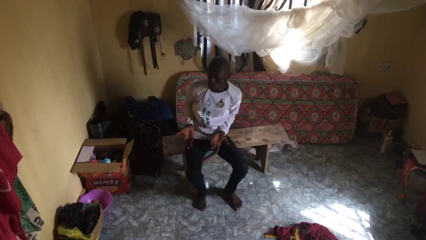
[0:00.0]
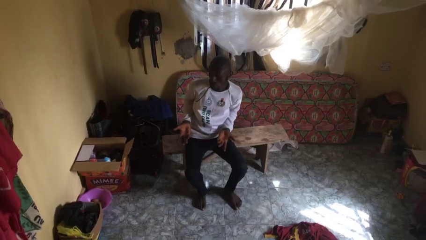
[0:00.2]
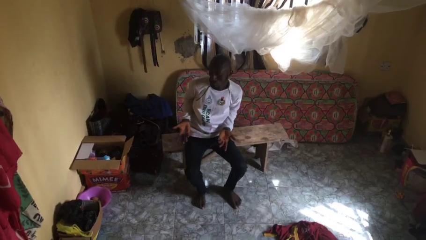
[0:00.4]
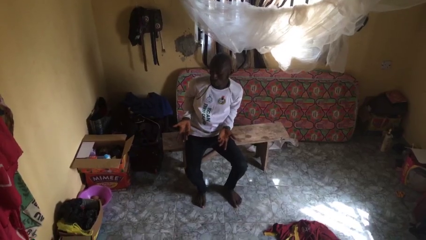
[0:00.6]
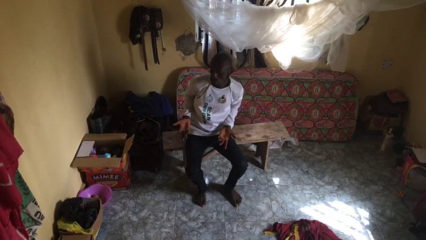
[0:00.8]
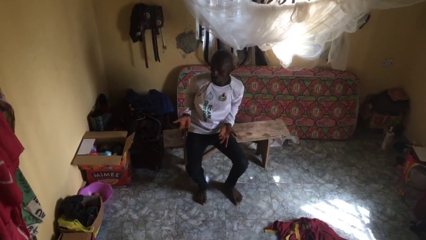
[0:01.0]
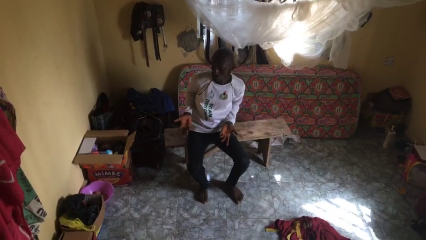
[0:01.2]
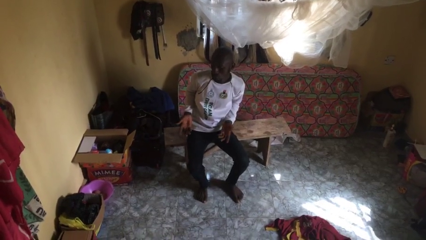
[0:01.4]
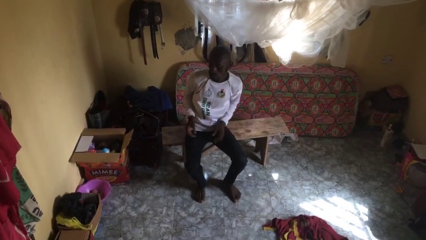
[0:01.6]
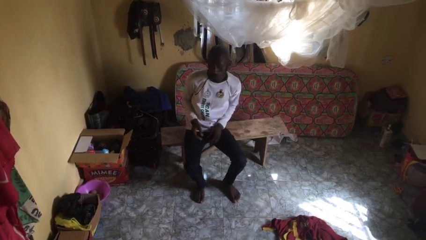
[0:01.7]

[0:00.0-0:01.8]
person shrugs

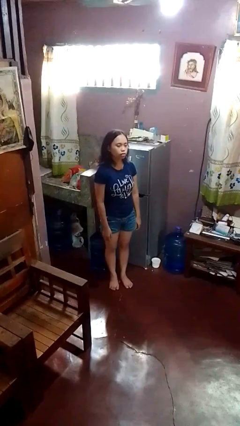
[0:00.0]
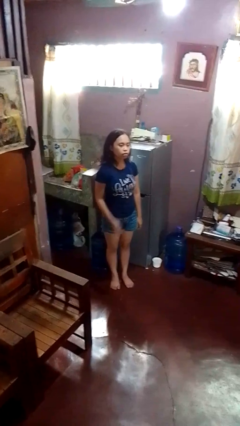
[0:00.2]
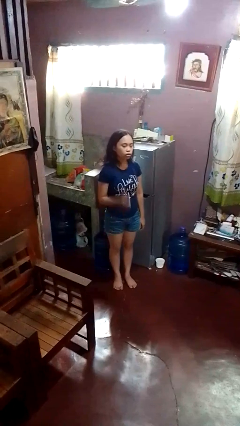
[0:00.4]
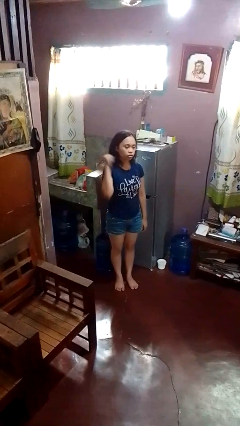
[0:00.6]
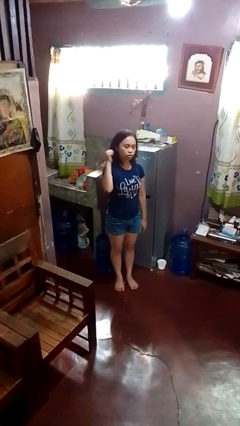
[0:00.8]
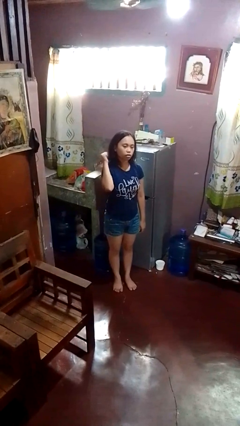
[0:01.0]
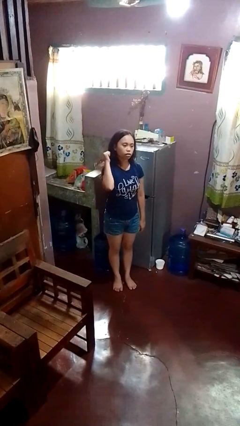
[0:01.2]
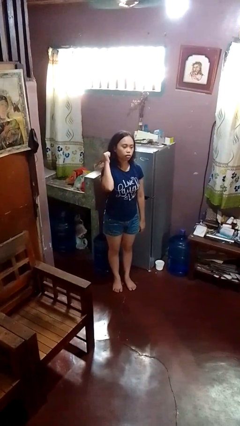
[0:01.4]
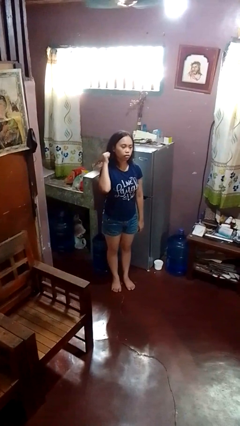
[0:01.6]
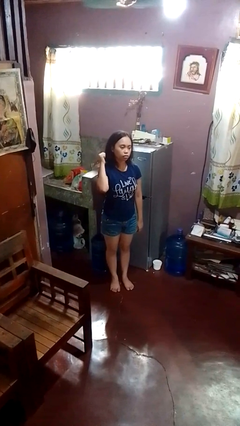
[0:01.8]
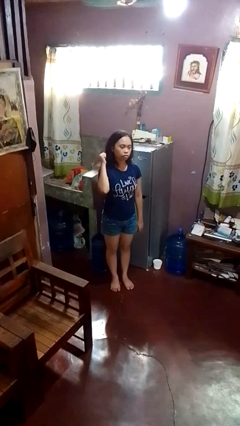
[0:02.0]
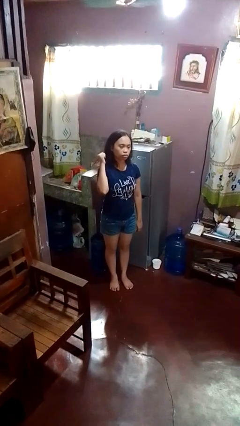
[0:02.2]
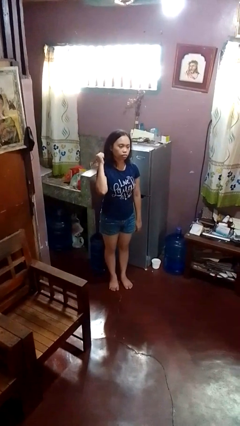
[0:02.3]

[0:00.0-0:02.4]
person gestures behind me

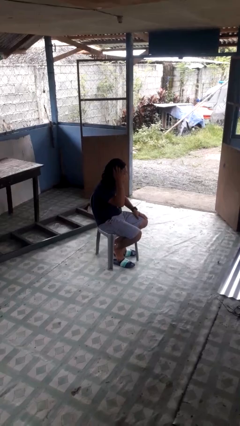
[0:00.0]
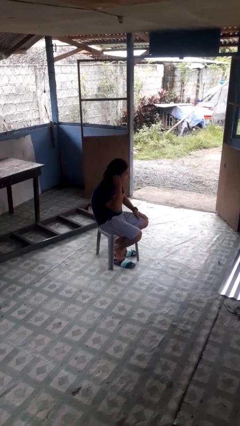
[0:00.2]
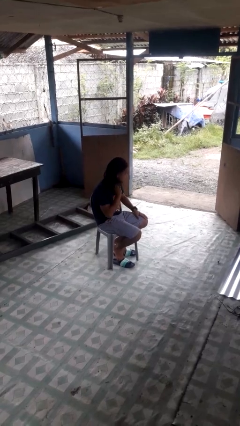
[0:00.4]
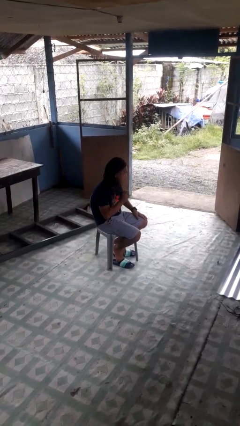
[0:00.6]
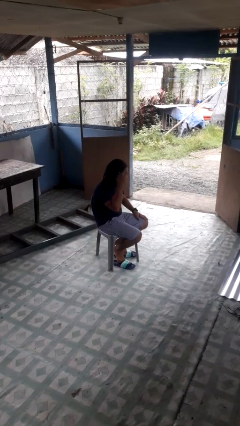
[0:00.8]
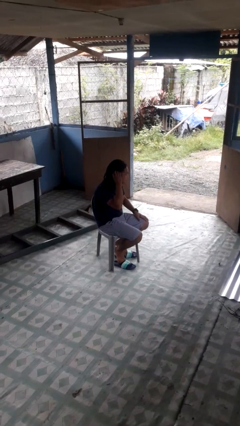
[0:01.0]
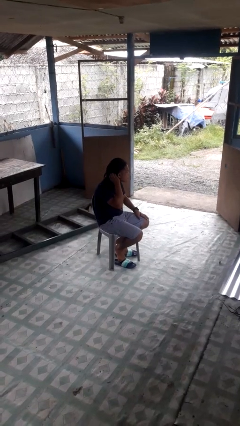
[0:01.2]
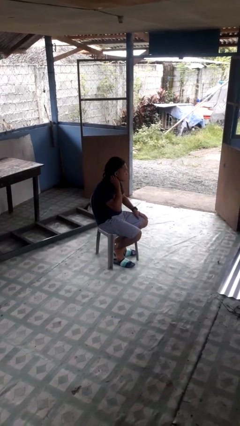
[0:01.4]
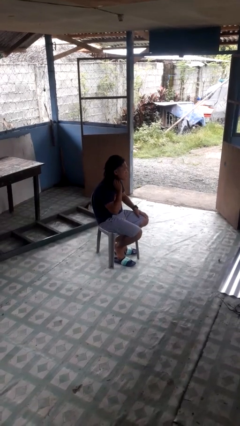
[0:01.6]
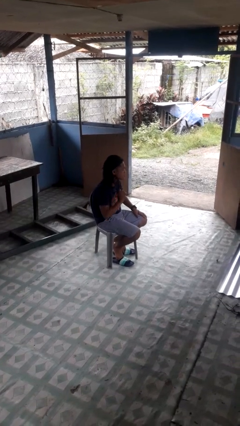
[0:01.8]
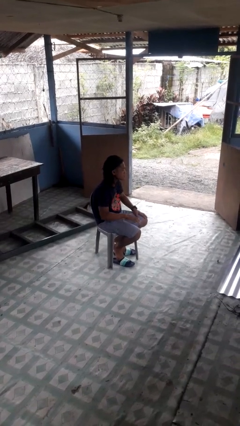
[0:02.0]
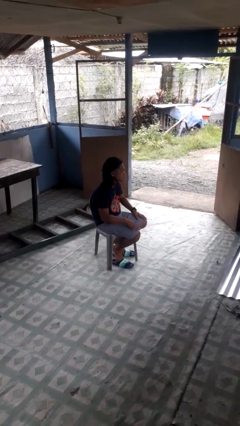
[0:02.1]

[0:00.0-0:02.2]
person strokes hair

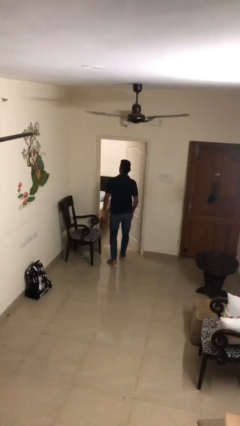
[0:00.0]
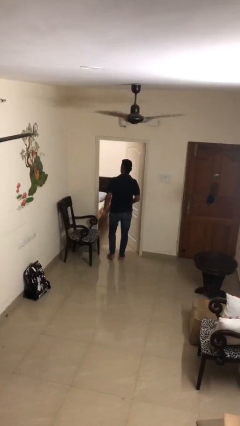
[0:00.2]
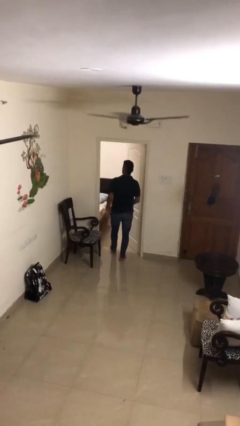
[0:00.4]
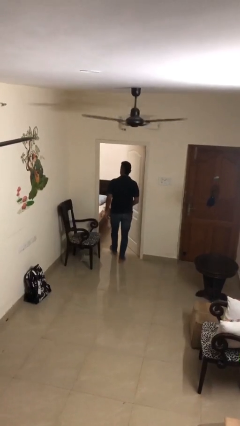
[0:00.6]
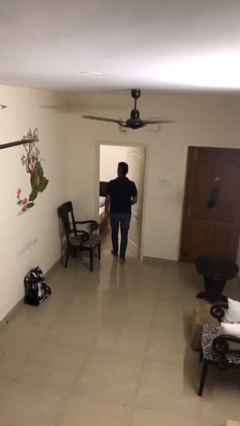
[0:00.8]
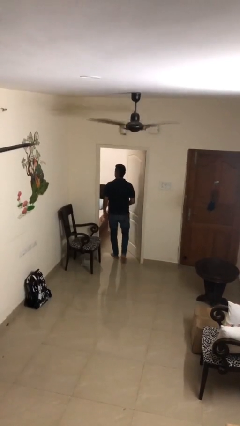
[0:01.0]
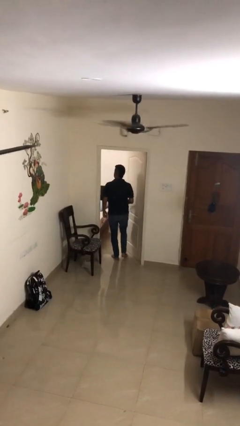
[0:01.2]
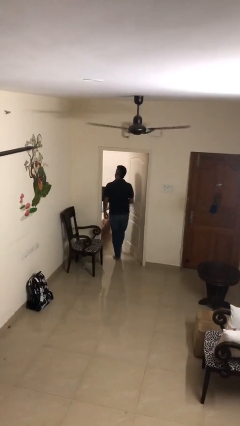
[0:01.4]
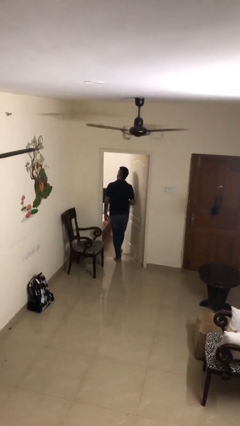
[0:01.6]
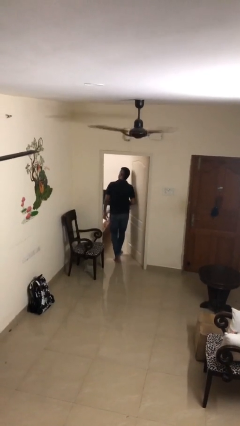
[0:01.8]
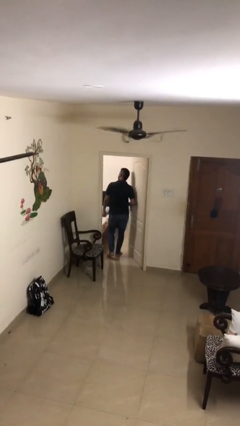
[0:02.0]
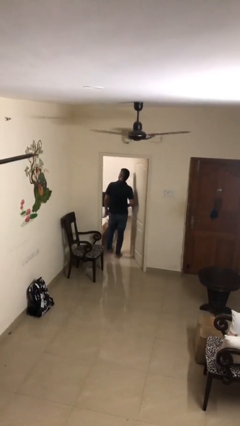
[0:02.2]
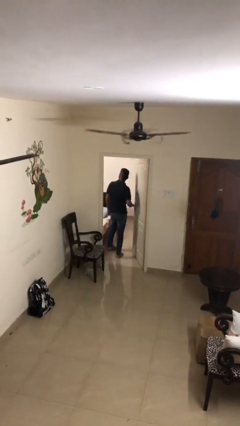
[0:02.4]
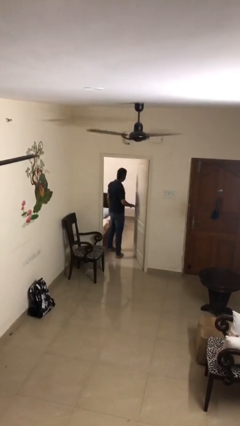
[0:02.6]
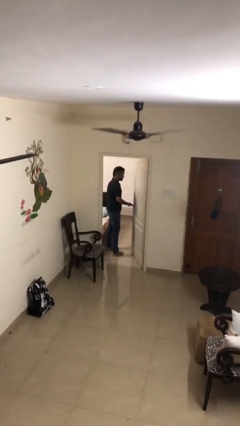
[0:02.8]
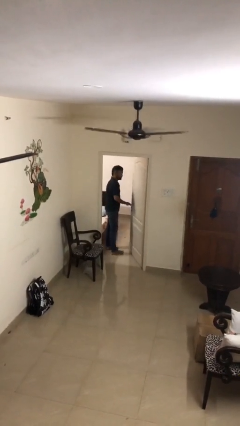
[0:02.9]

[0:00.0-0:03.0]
person exits scene through structure

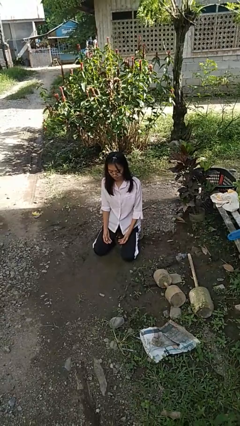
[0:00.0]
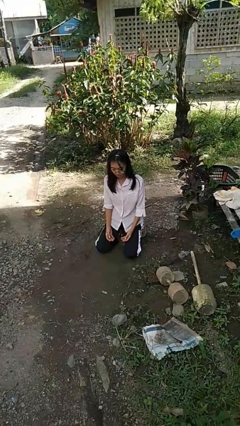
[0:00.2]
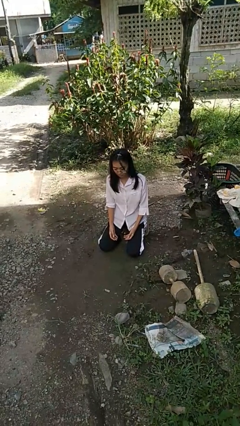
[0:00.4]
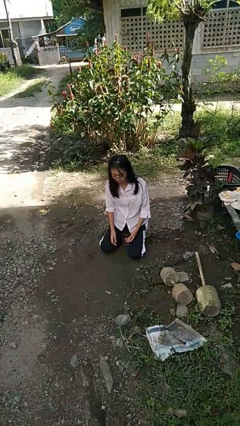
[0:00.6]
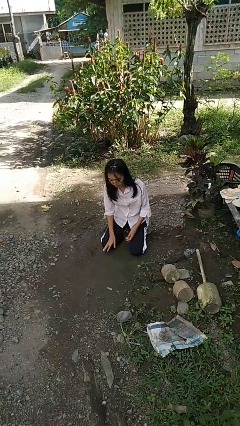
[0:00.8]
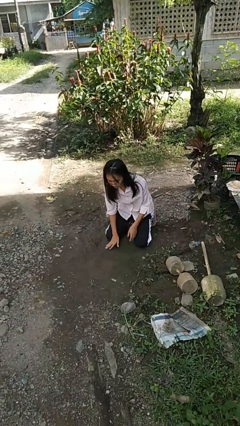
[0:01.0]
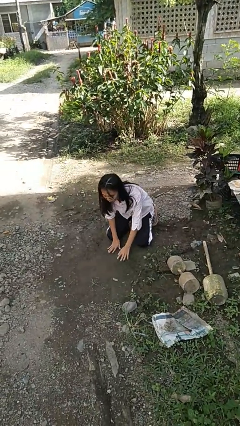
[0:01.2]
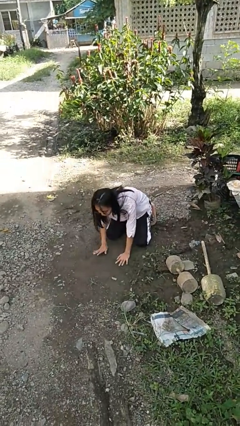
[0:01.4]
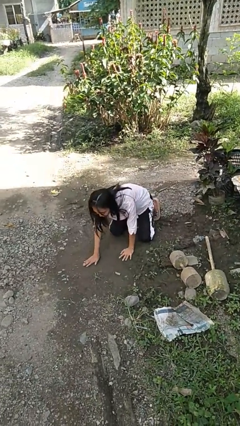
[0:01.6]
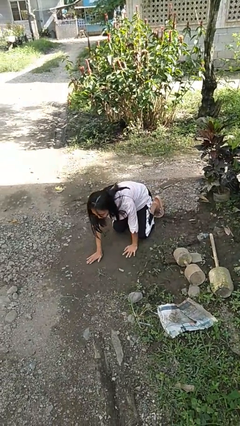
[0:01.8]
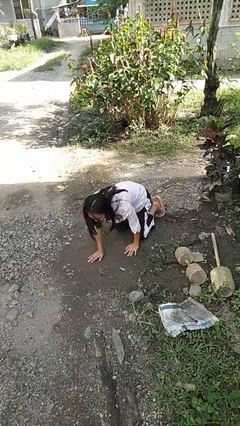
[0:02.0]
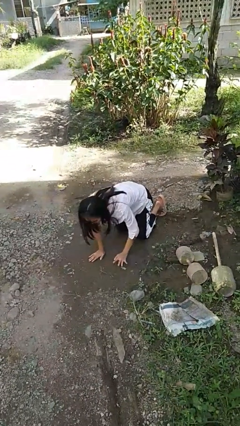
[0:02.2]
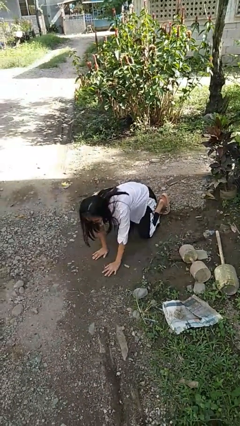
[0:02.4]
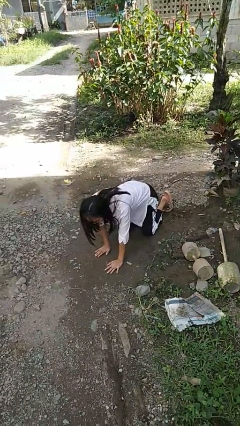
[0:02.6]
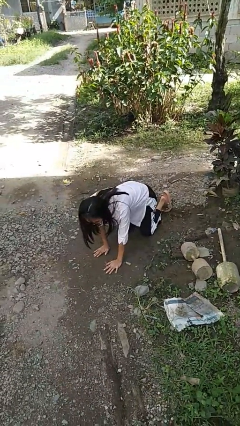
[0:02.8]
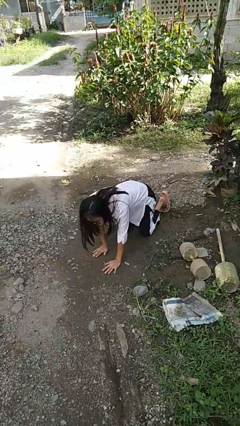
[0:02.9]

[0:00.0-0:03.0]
person crawls

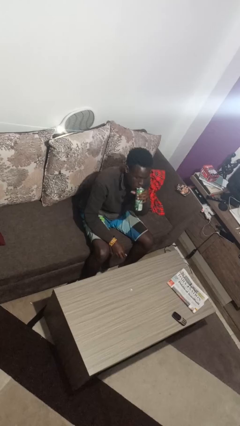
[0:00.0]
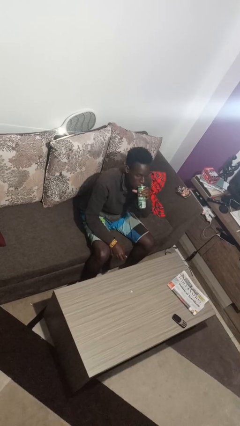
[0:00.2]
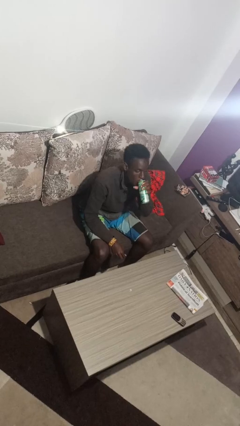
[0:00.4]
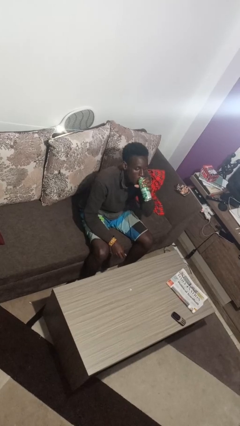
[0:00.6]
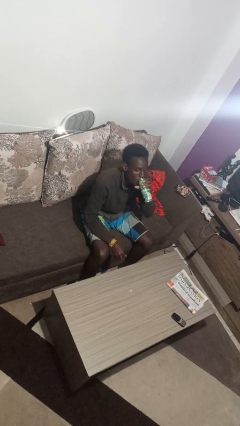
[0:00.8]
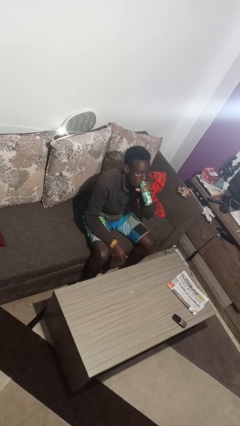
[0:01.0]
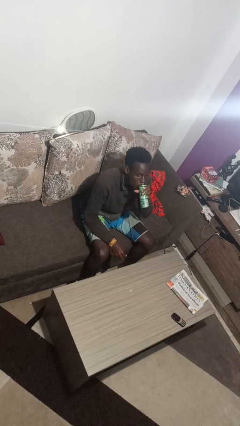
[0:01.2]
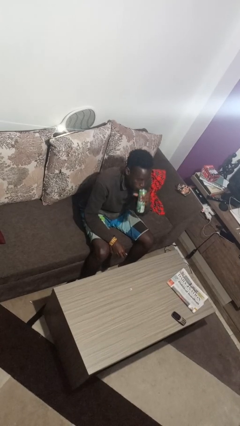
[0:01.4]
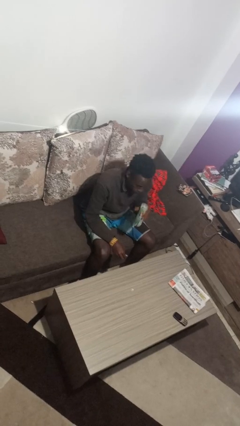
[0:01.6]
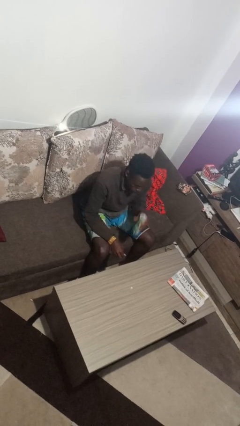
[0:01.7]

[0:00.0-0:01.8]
person drinks from beverage can

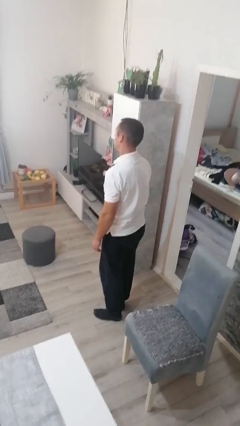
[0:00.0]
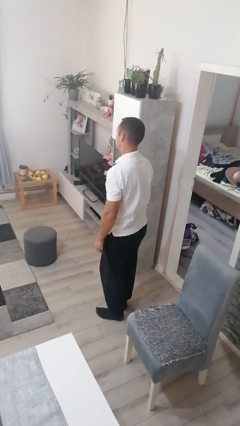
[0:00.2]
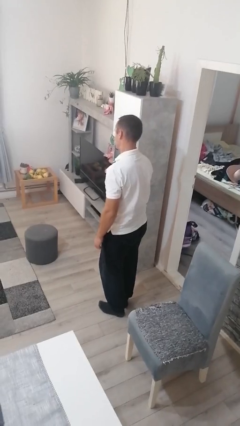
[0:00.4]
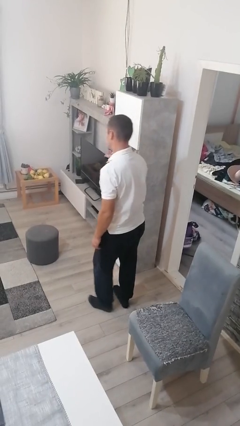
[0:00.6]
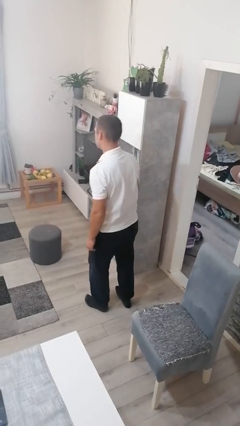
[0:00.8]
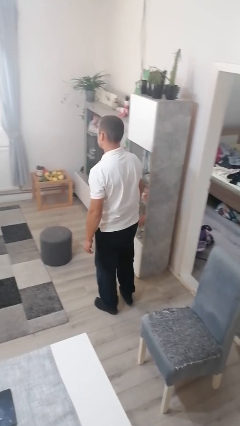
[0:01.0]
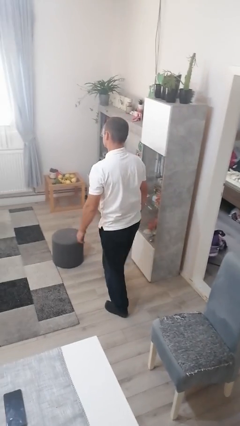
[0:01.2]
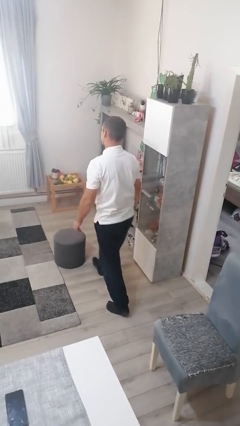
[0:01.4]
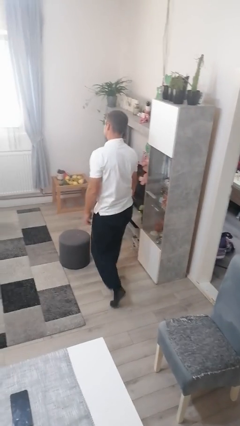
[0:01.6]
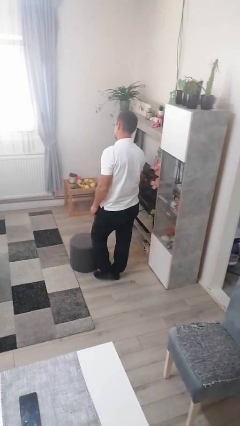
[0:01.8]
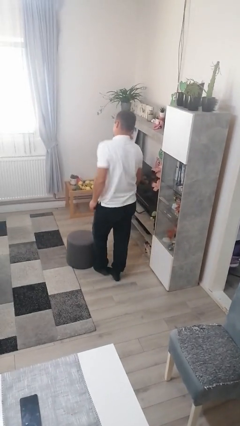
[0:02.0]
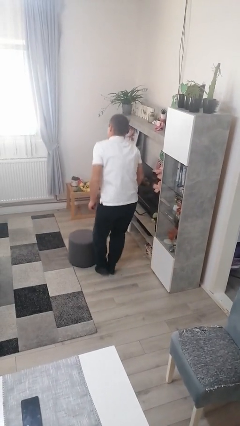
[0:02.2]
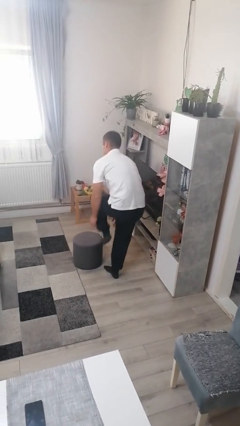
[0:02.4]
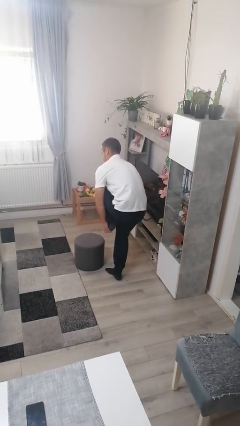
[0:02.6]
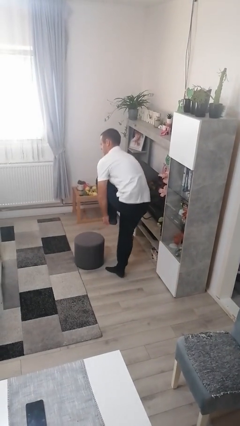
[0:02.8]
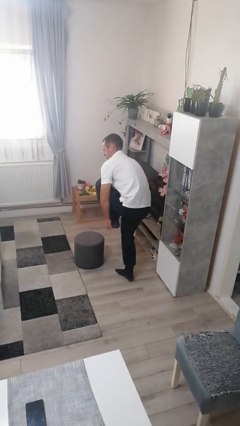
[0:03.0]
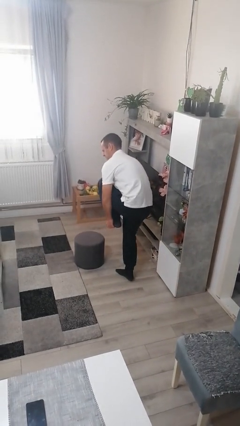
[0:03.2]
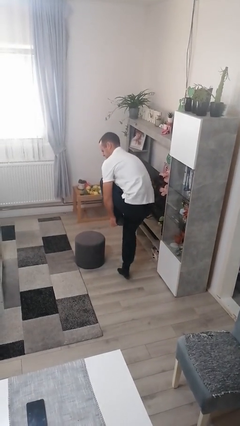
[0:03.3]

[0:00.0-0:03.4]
person stubs toe
